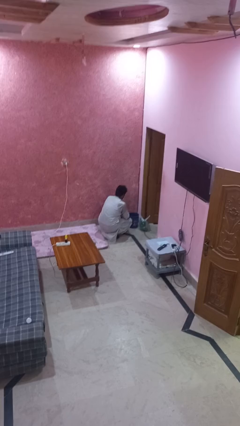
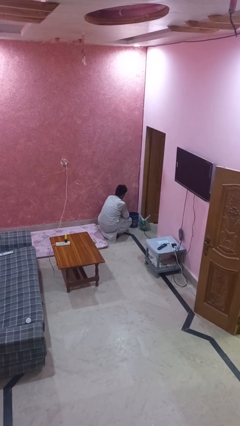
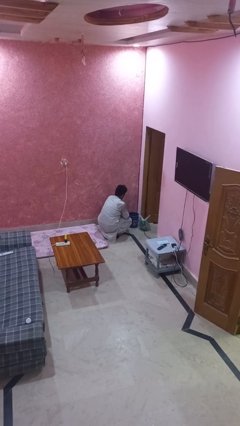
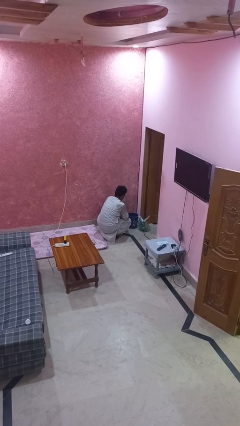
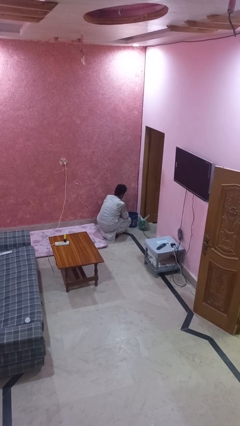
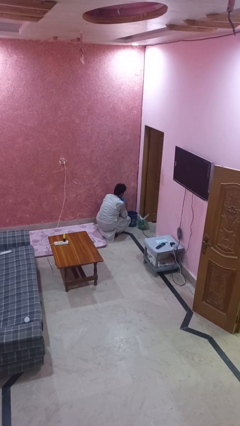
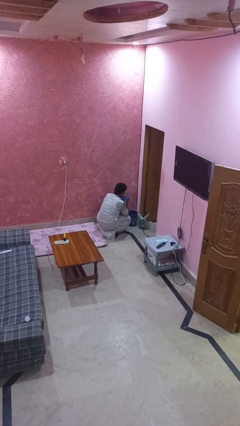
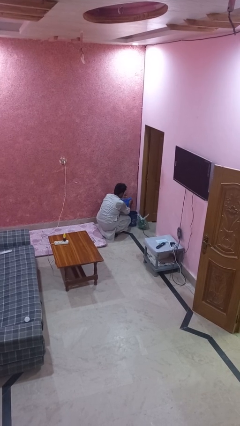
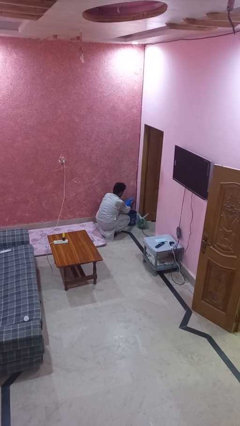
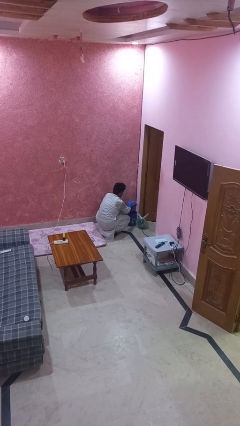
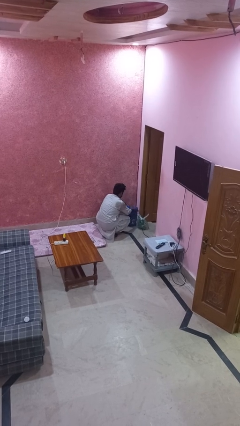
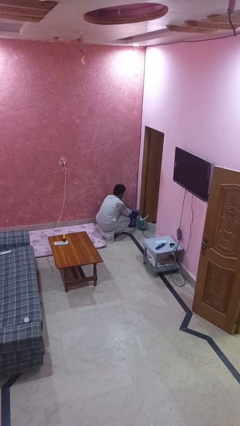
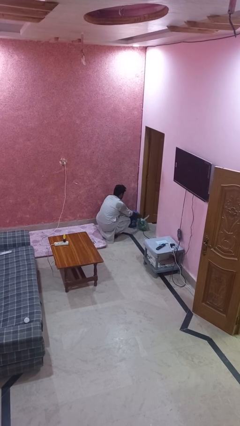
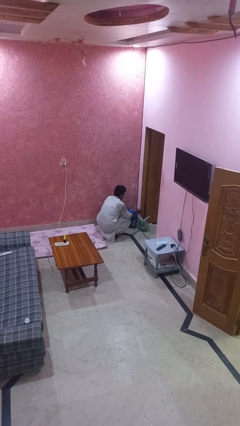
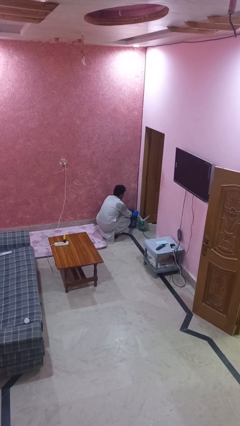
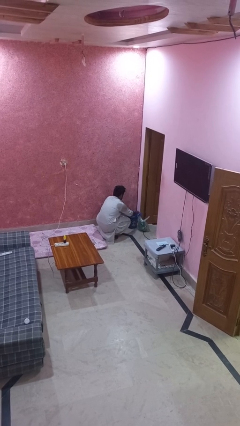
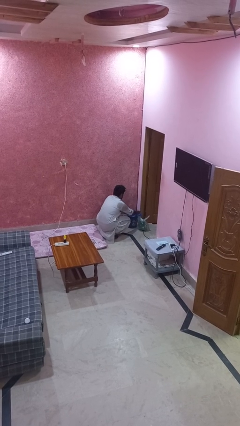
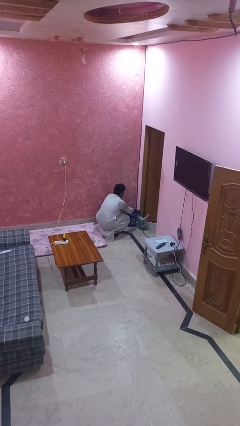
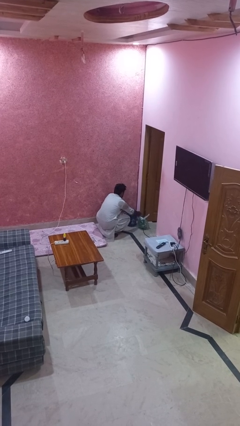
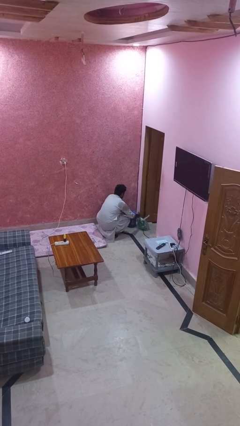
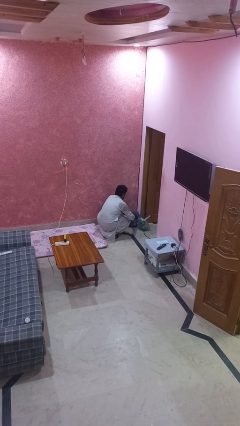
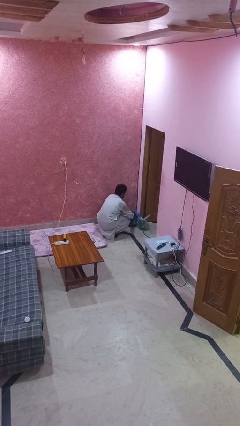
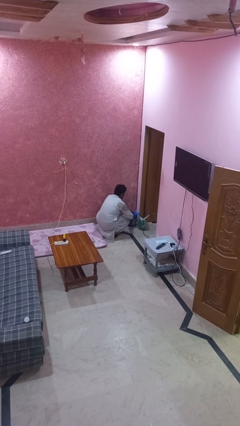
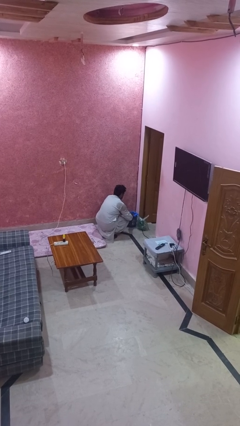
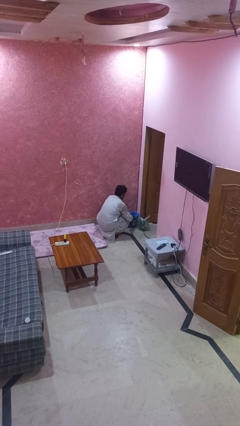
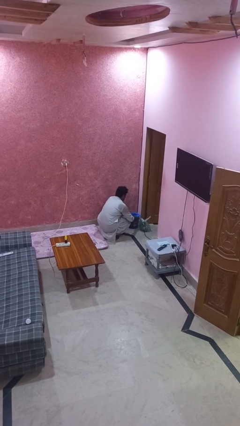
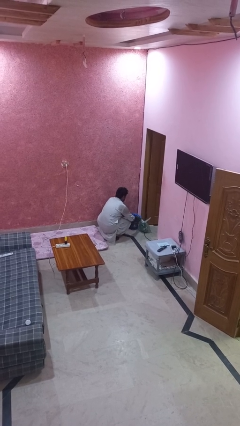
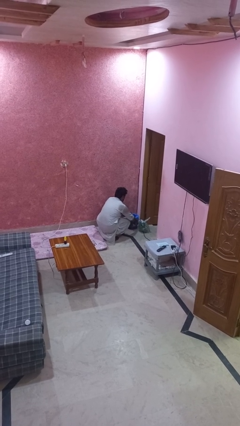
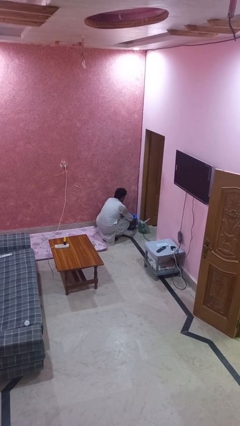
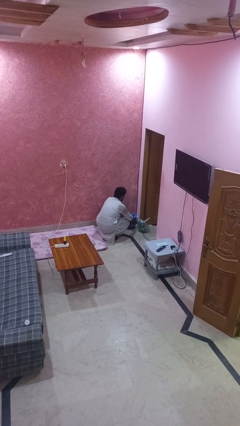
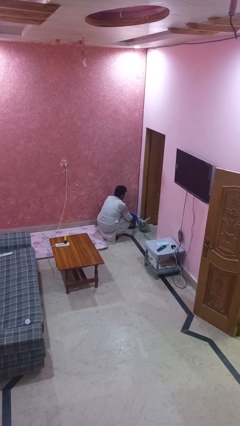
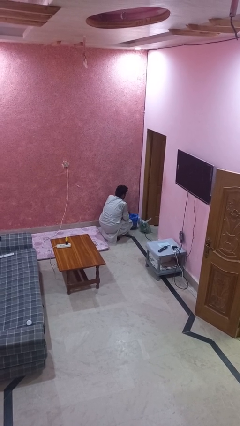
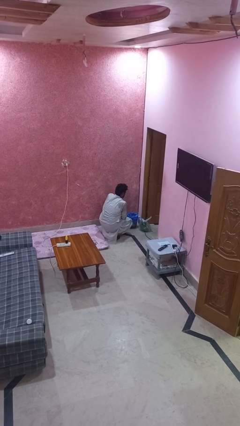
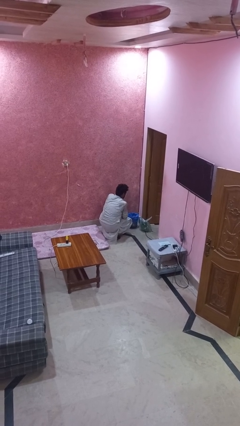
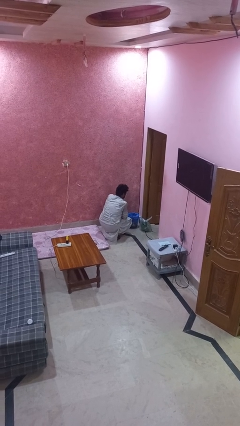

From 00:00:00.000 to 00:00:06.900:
person inserts trashbag into trashcan

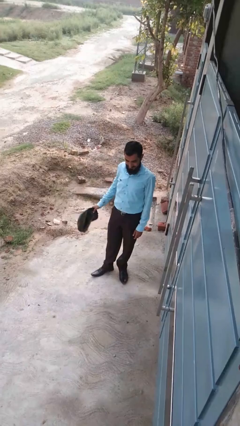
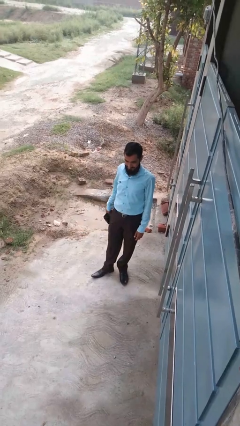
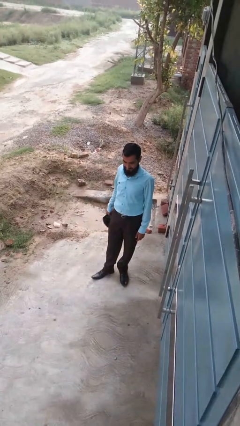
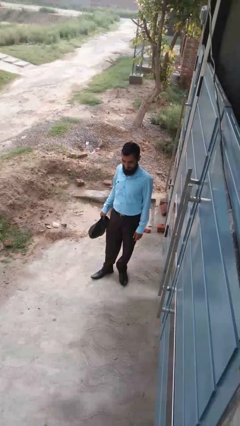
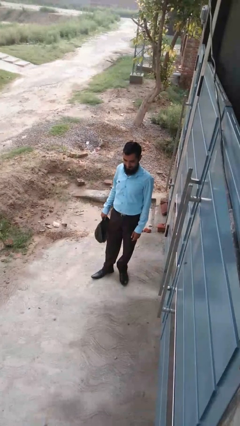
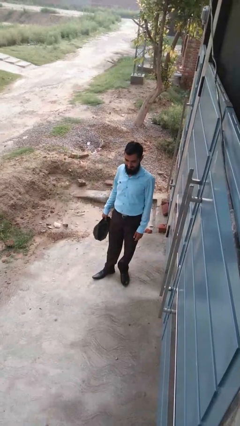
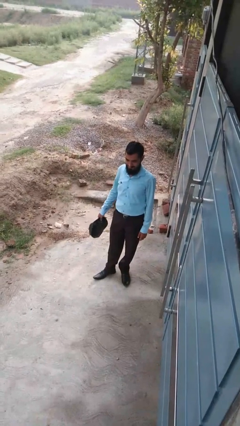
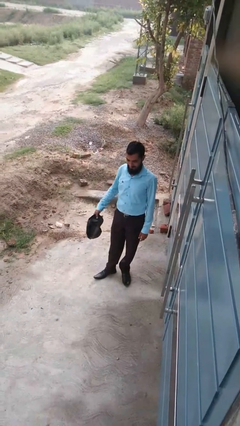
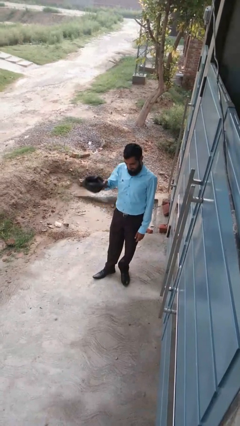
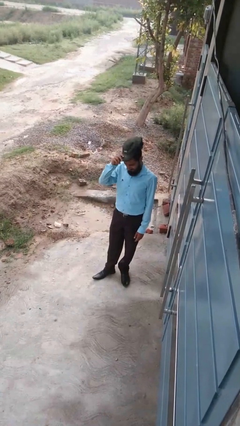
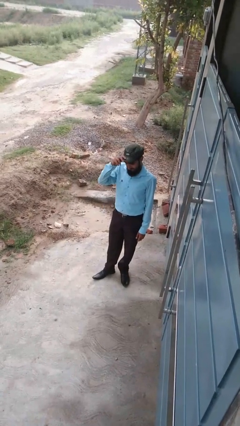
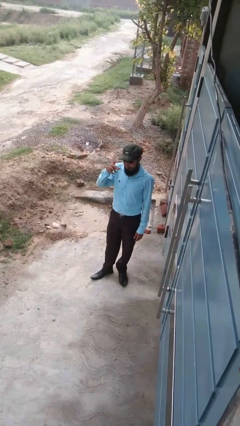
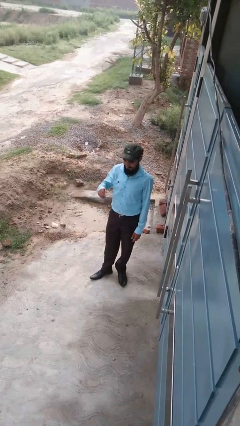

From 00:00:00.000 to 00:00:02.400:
person puts on hat

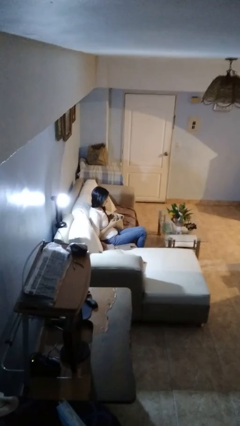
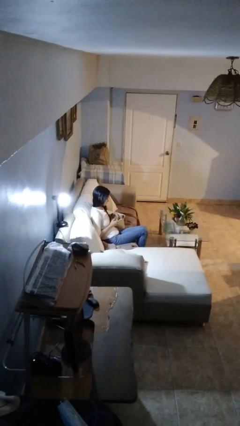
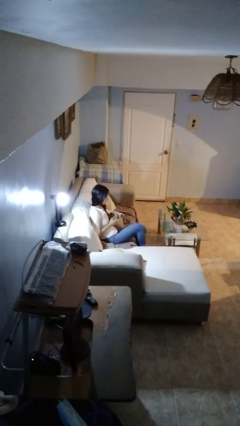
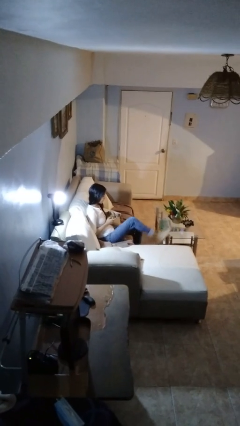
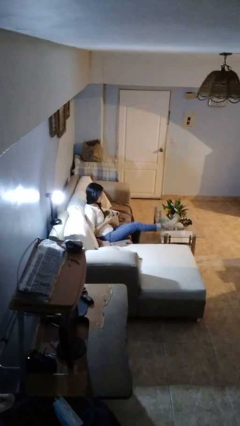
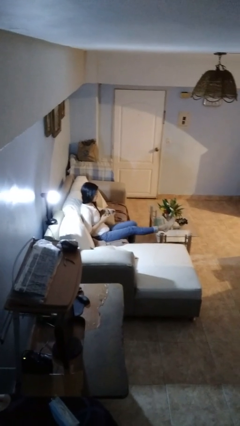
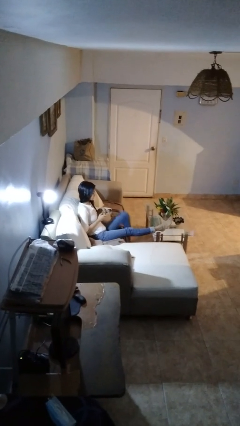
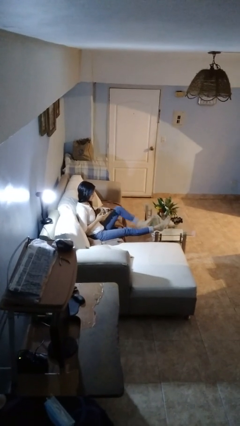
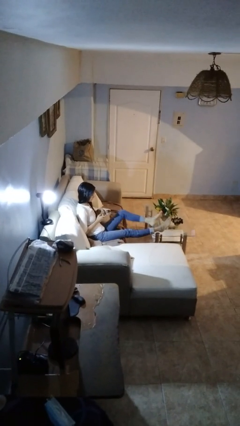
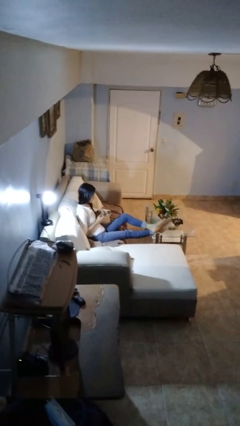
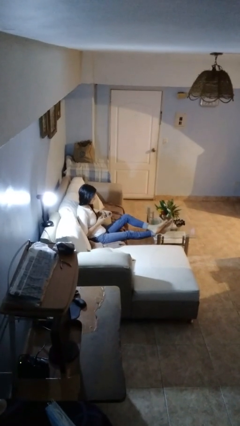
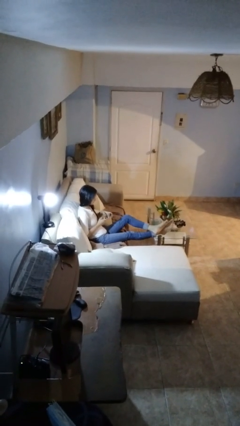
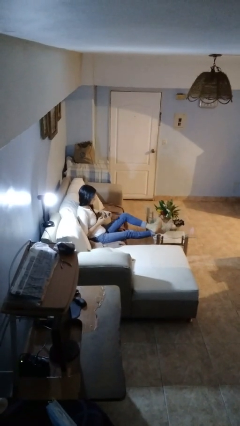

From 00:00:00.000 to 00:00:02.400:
person puts feet up

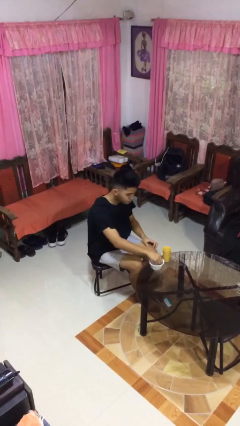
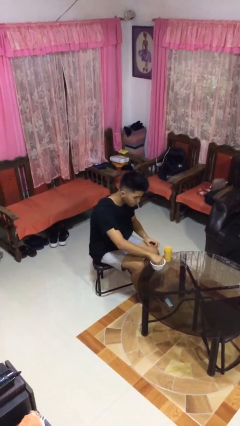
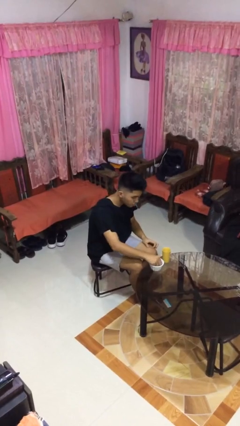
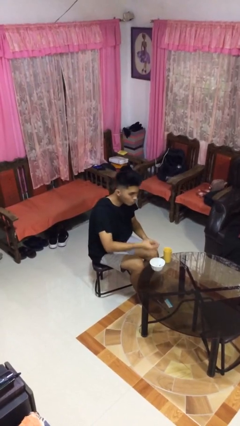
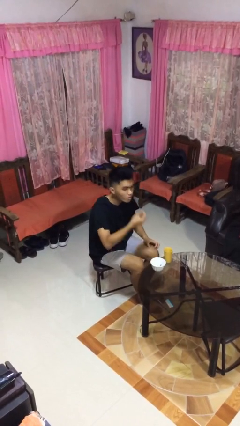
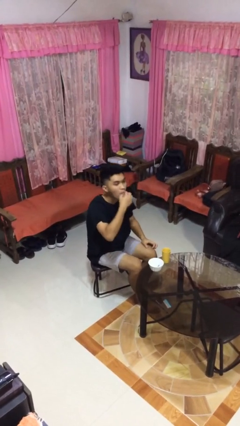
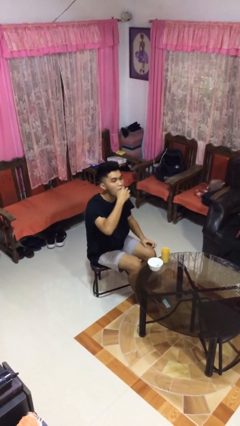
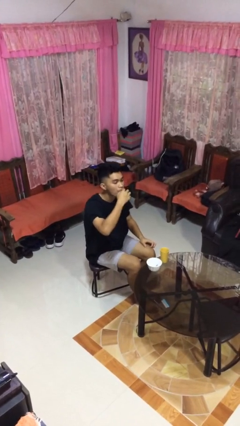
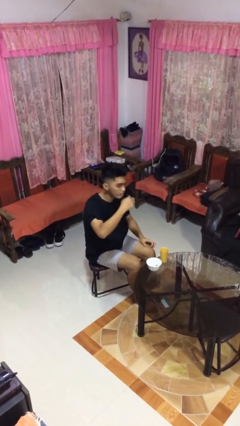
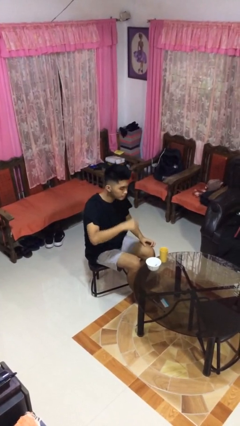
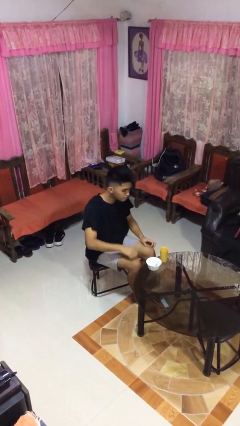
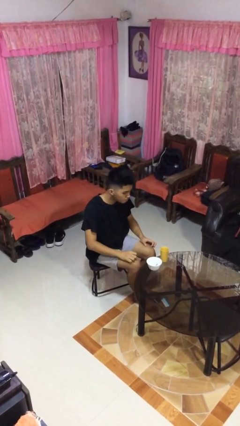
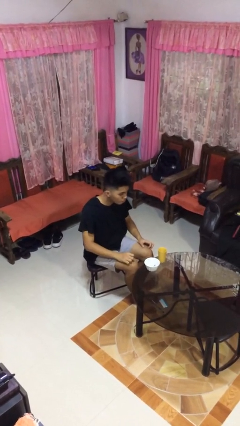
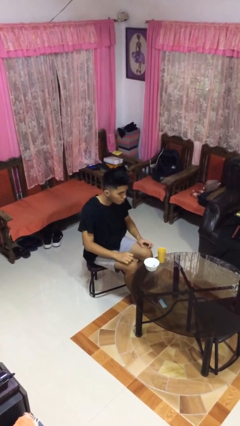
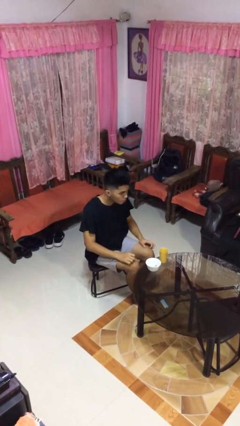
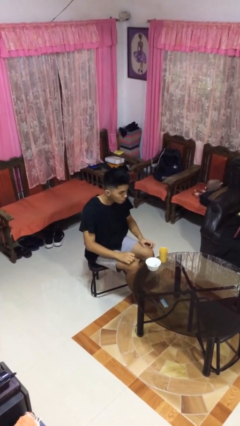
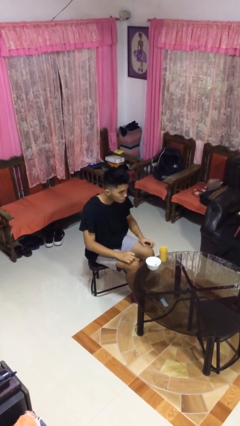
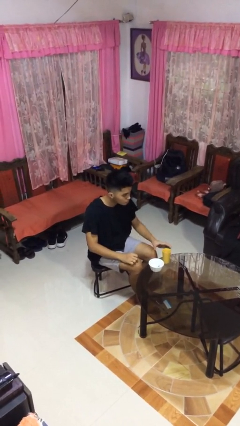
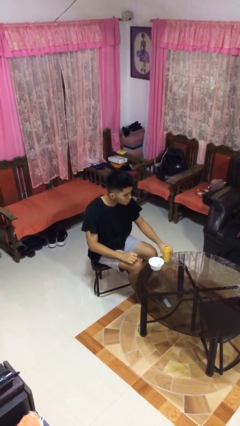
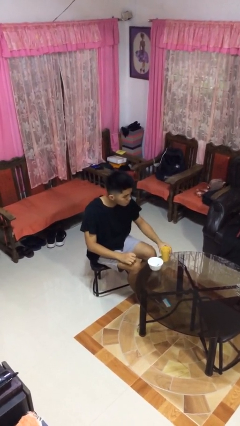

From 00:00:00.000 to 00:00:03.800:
person takes medicine pills

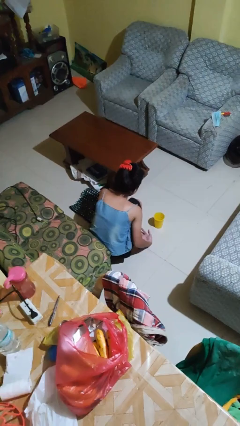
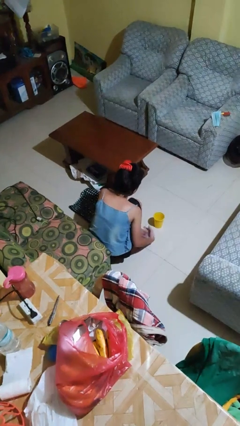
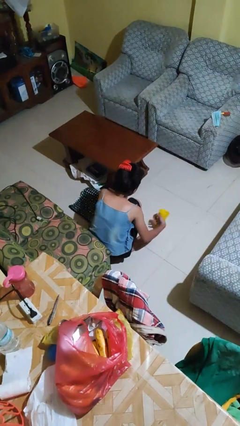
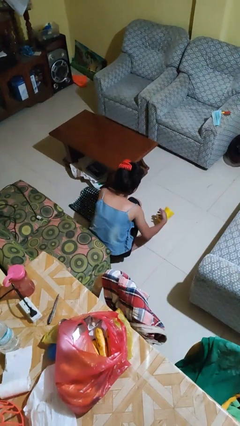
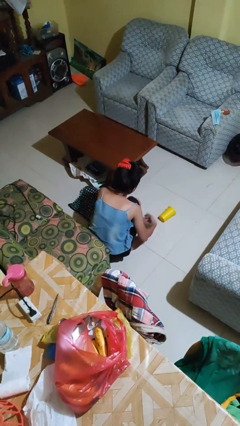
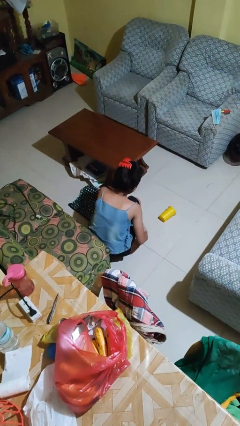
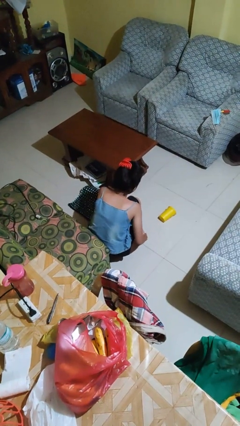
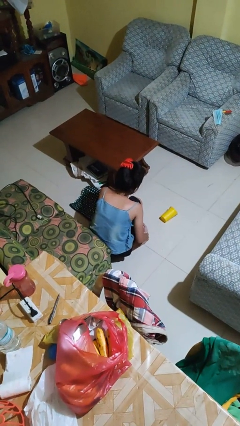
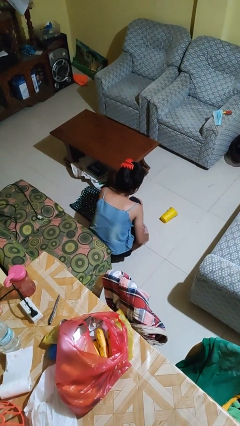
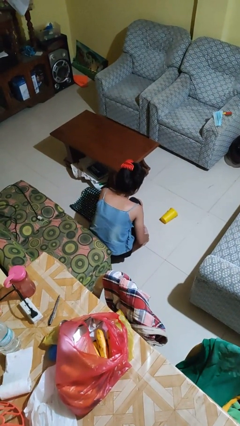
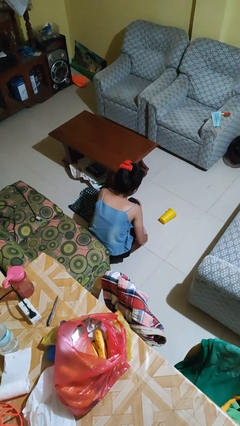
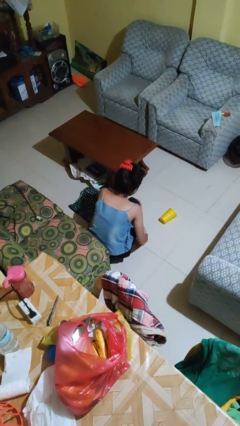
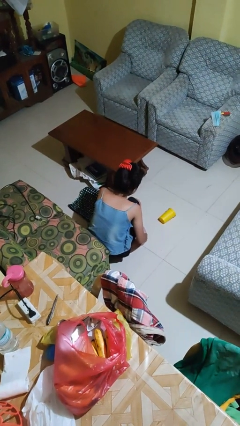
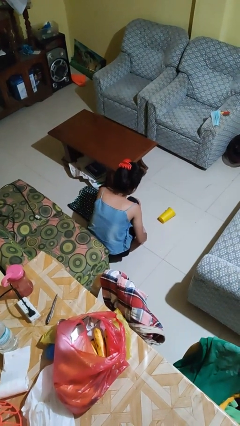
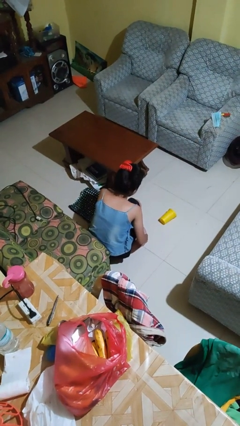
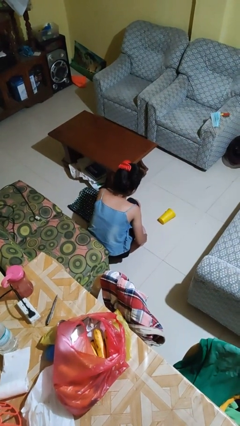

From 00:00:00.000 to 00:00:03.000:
person spills on floor
